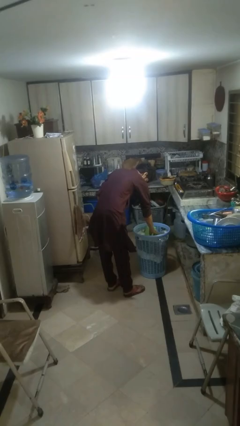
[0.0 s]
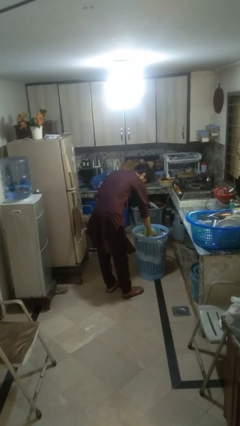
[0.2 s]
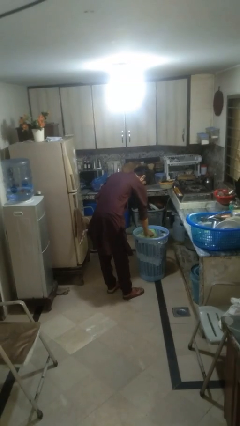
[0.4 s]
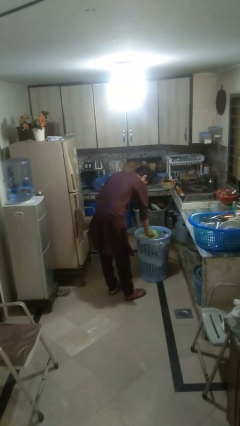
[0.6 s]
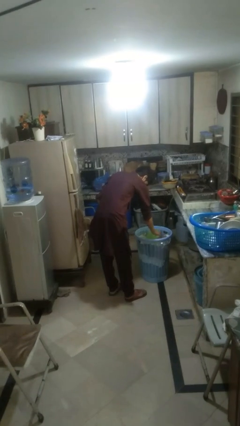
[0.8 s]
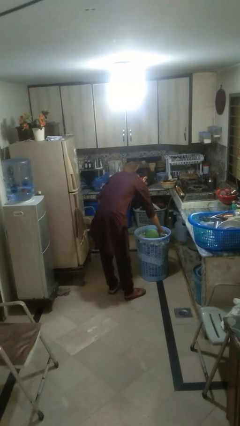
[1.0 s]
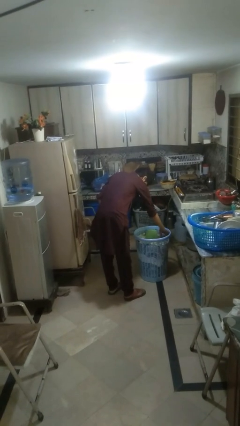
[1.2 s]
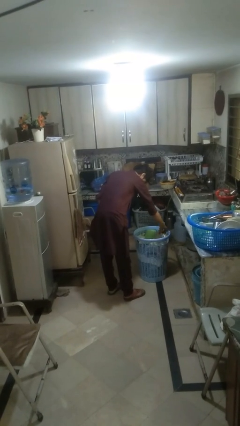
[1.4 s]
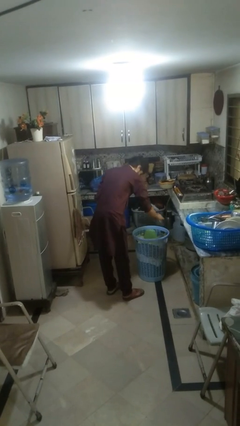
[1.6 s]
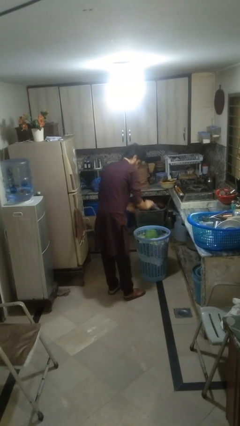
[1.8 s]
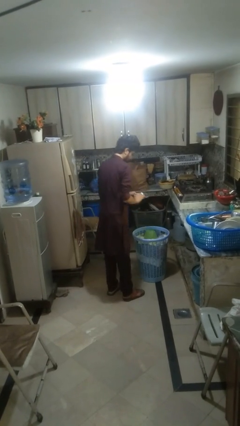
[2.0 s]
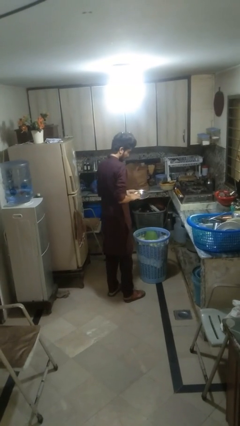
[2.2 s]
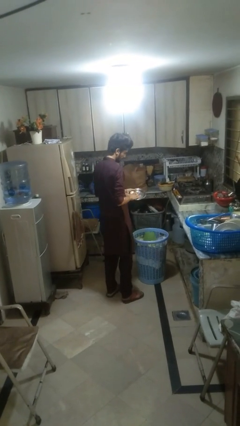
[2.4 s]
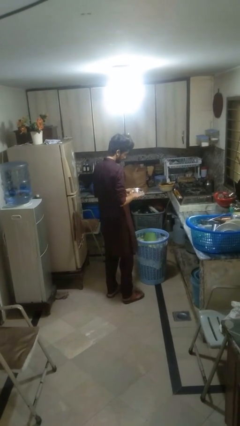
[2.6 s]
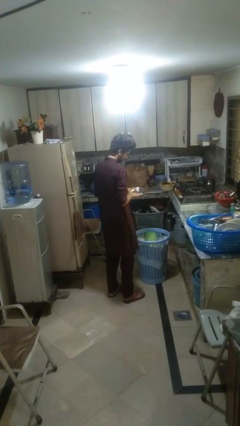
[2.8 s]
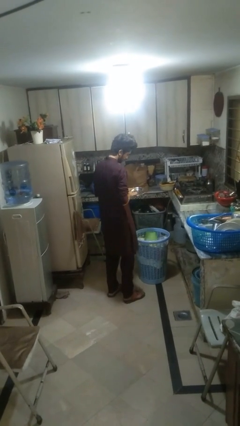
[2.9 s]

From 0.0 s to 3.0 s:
person takes object from basket

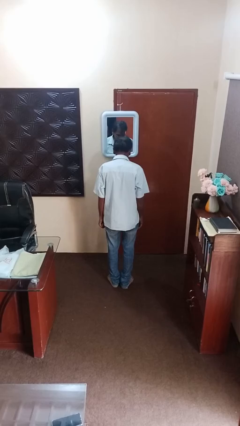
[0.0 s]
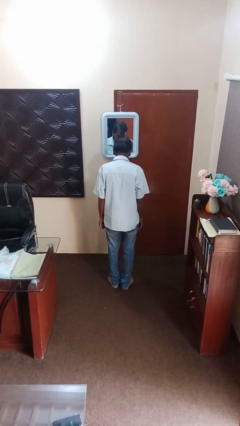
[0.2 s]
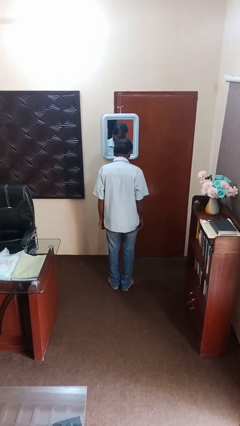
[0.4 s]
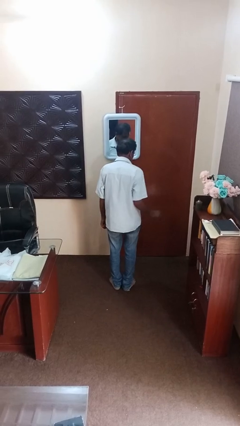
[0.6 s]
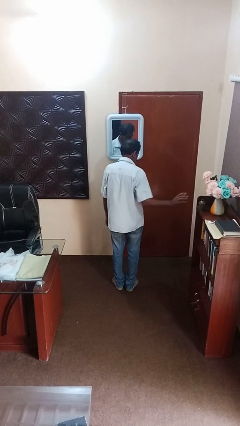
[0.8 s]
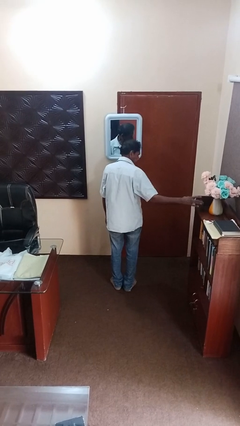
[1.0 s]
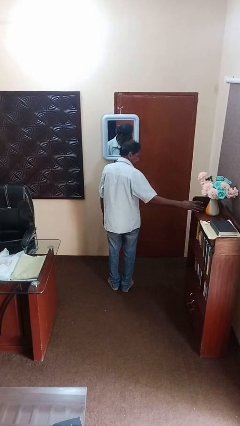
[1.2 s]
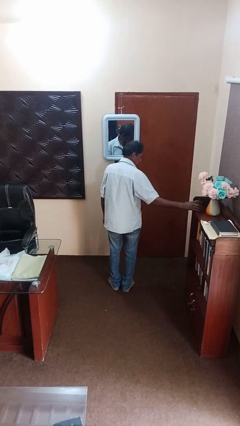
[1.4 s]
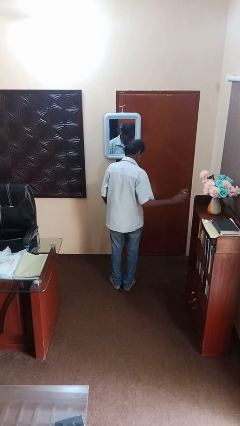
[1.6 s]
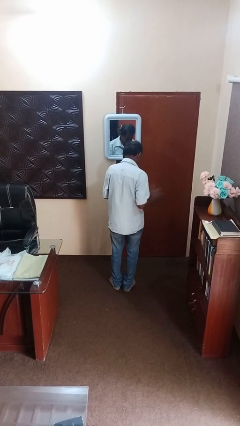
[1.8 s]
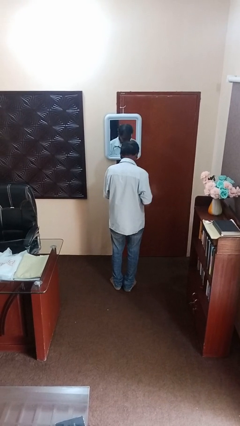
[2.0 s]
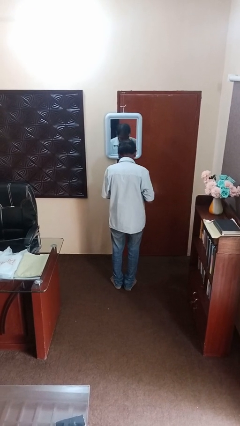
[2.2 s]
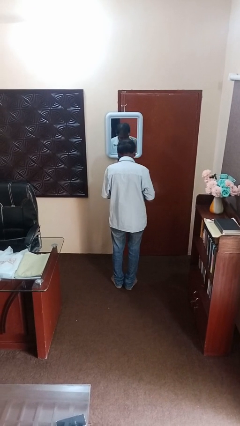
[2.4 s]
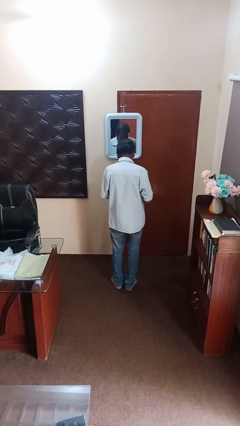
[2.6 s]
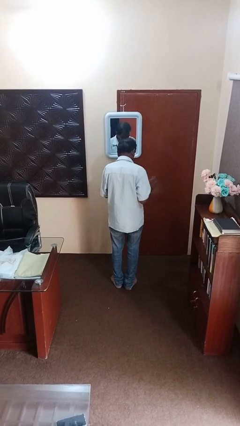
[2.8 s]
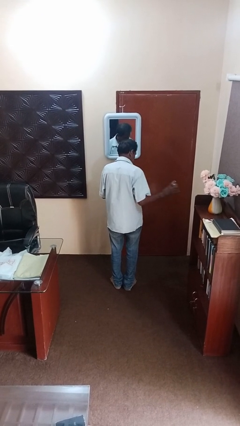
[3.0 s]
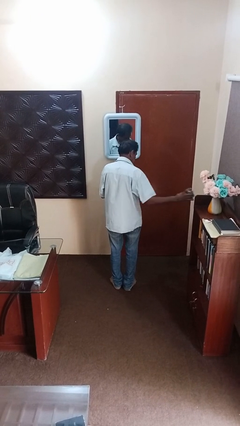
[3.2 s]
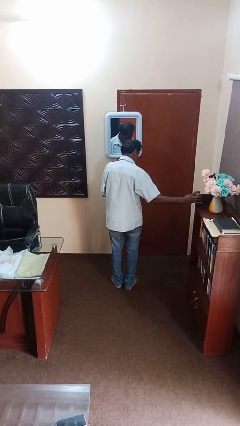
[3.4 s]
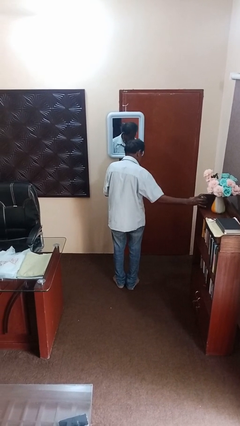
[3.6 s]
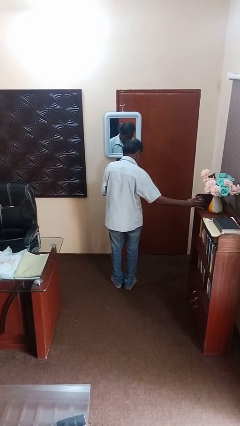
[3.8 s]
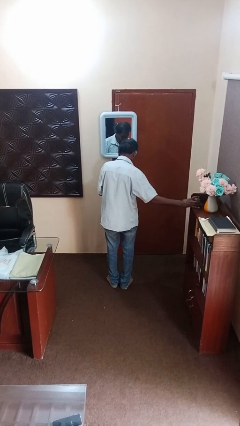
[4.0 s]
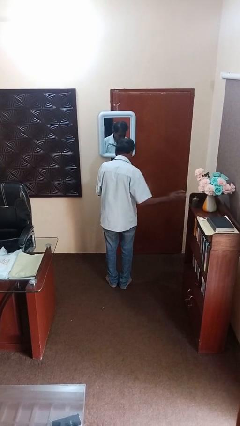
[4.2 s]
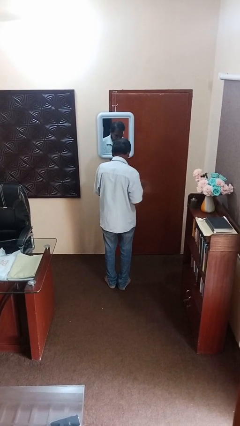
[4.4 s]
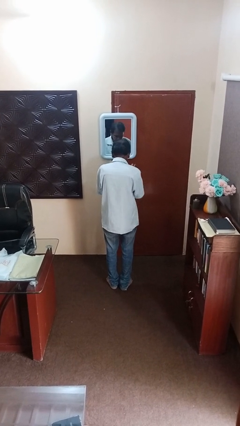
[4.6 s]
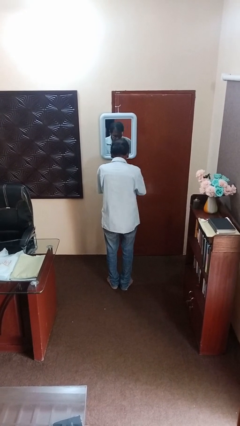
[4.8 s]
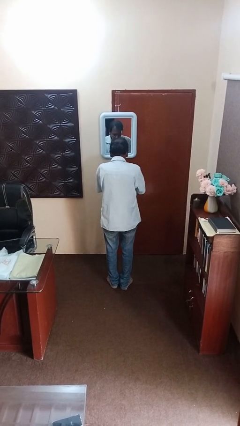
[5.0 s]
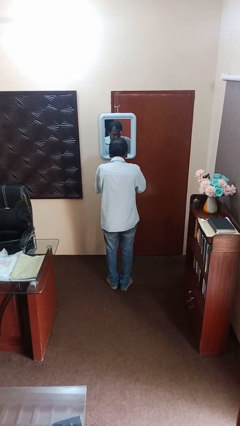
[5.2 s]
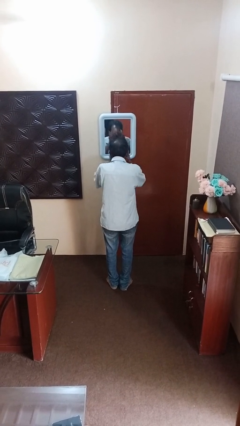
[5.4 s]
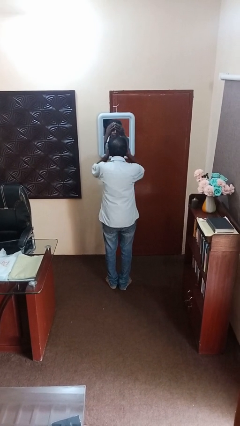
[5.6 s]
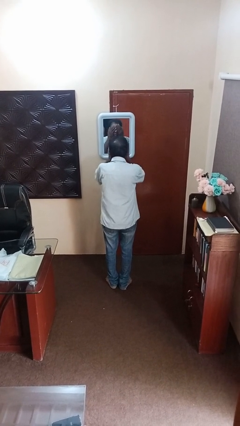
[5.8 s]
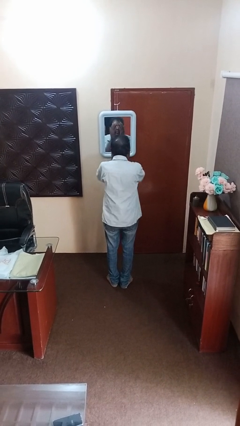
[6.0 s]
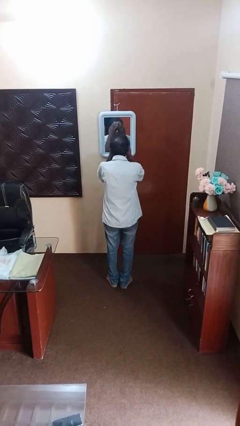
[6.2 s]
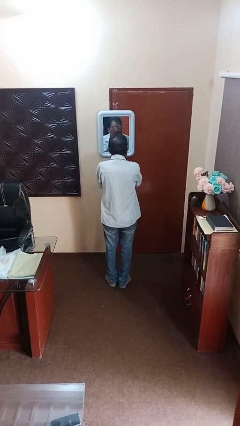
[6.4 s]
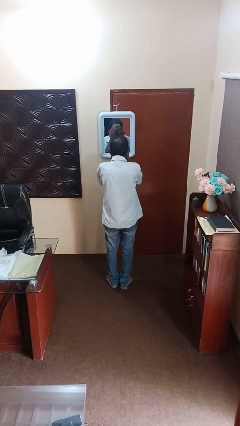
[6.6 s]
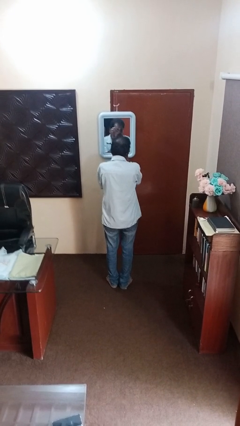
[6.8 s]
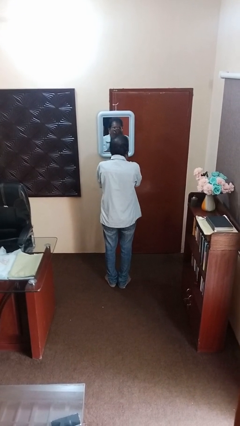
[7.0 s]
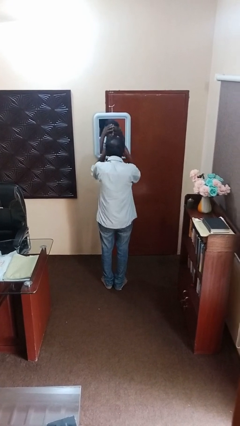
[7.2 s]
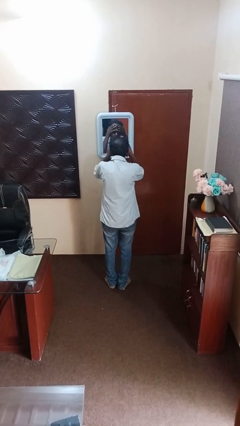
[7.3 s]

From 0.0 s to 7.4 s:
person applies foundation makeup

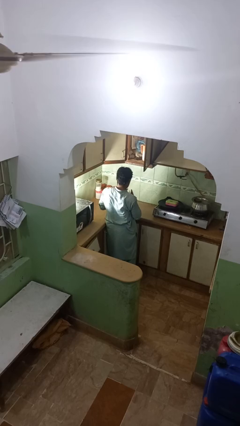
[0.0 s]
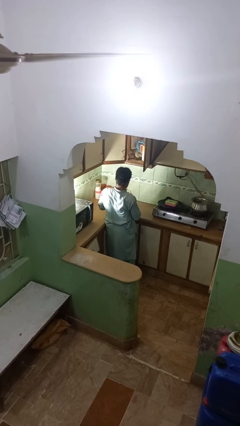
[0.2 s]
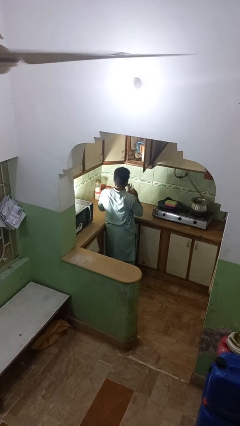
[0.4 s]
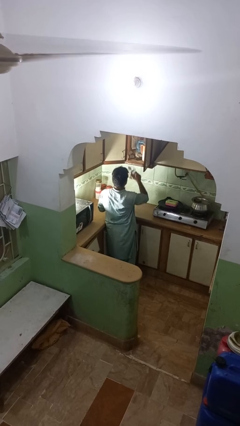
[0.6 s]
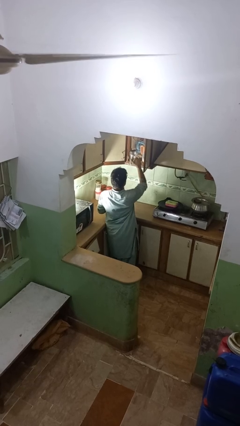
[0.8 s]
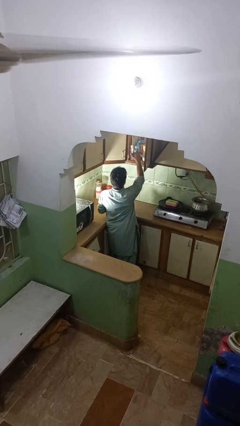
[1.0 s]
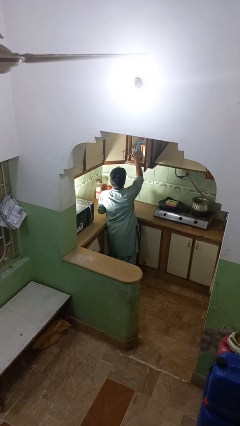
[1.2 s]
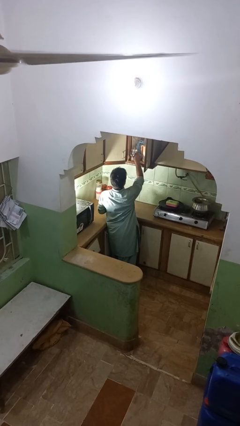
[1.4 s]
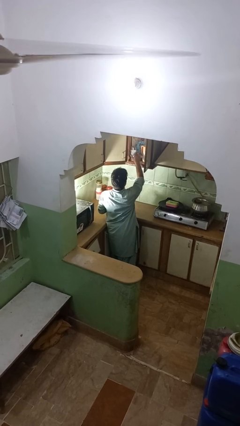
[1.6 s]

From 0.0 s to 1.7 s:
person puts object into kitchen drawer

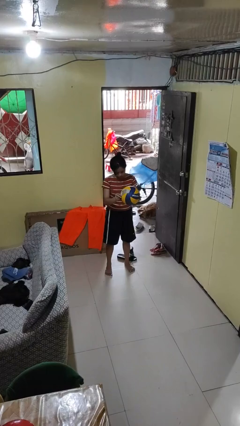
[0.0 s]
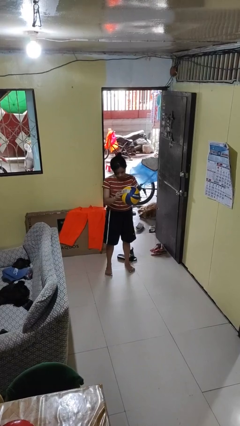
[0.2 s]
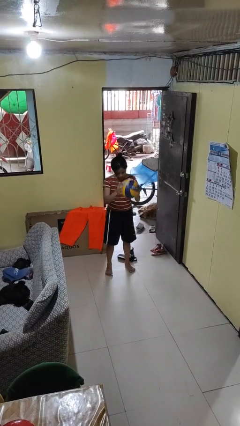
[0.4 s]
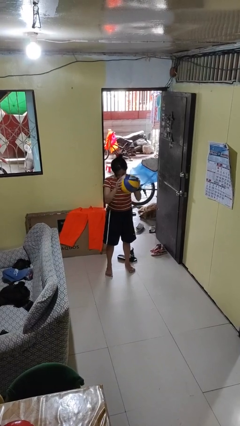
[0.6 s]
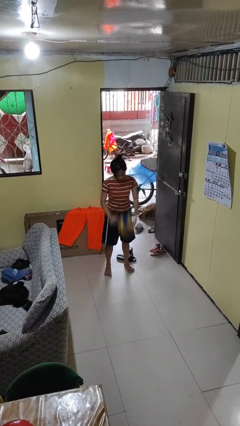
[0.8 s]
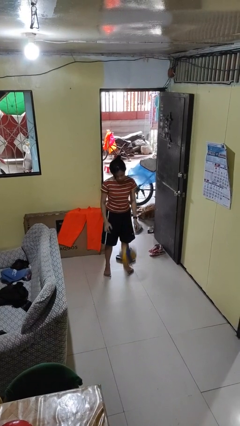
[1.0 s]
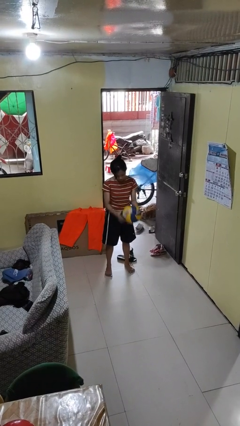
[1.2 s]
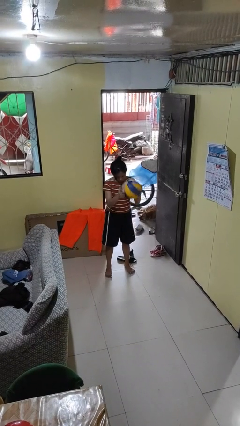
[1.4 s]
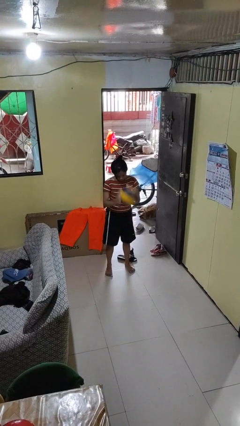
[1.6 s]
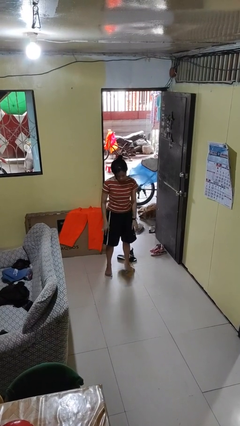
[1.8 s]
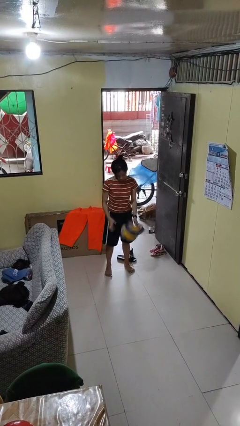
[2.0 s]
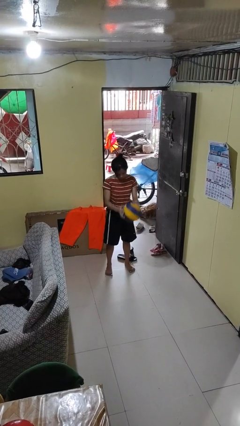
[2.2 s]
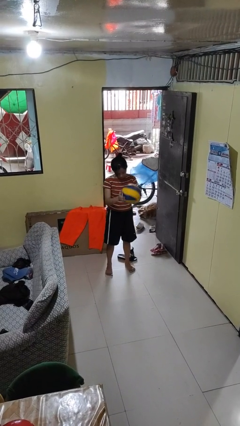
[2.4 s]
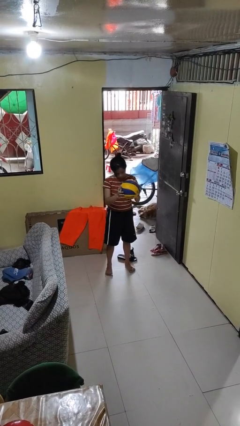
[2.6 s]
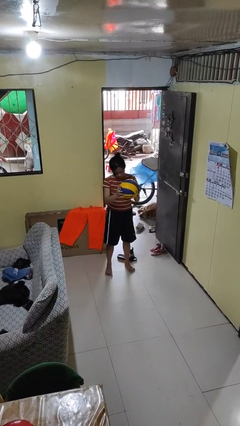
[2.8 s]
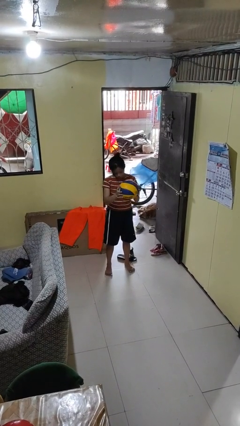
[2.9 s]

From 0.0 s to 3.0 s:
person bounces ball on floor

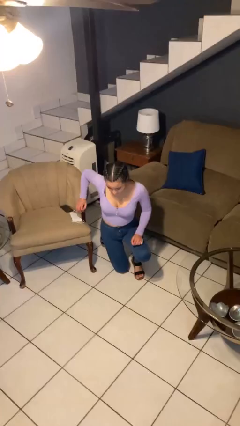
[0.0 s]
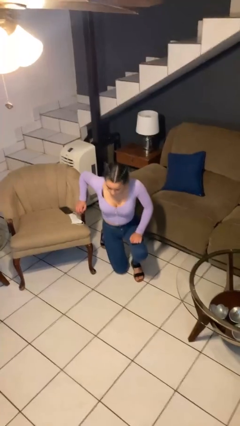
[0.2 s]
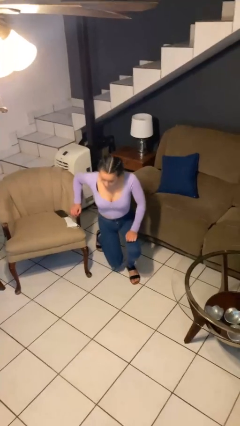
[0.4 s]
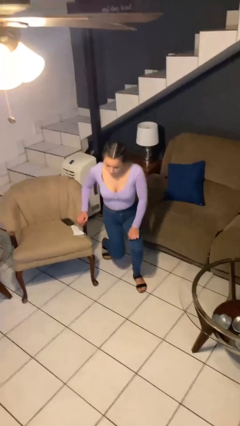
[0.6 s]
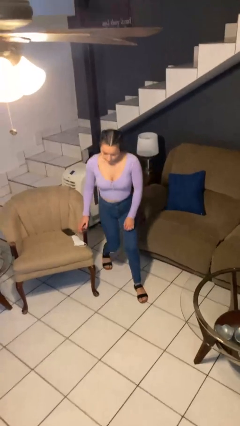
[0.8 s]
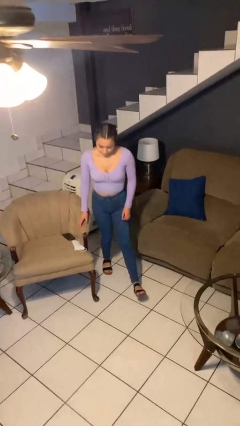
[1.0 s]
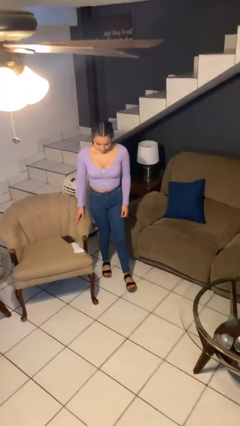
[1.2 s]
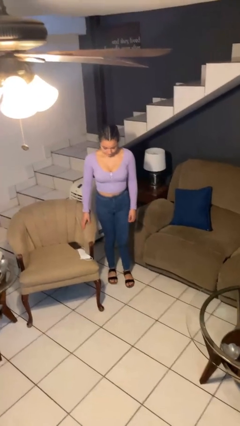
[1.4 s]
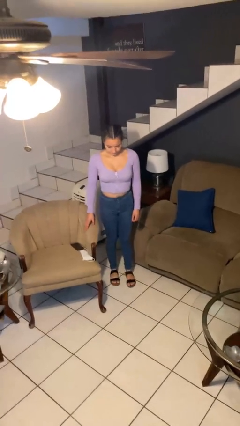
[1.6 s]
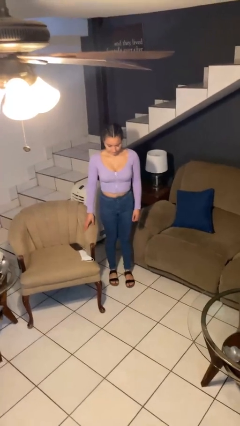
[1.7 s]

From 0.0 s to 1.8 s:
person stands up from floor

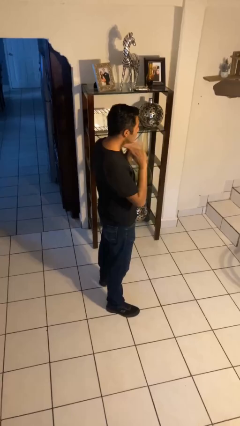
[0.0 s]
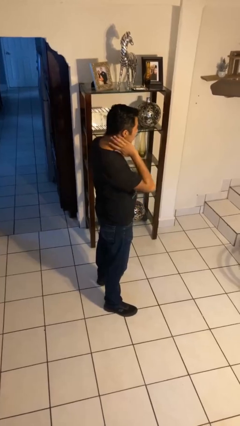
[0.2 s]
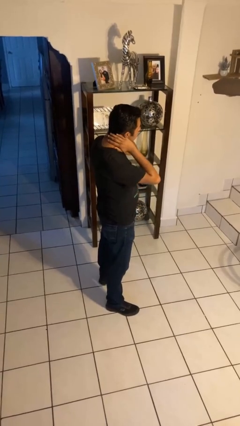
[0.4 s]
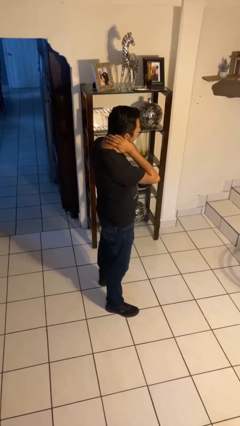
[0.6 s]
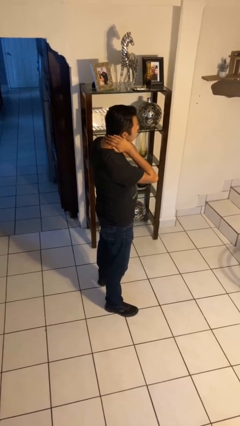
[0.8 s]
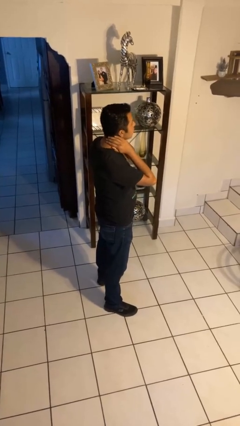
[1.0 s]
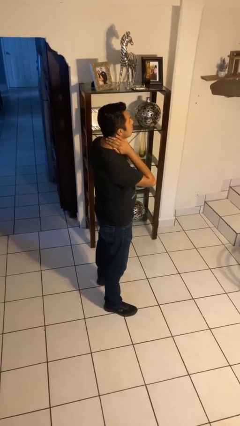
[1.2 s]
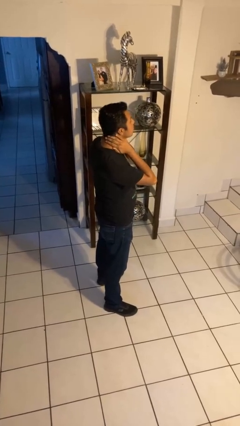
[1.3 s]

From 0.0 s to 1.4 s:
person rubs neck
